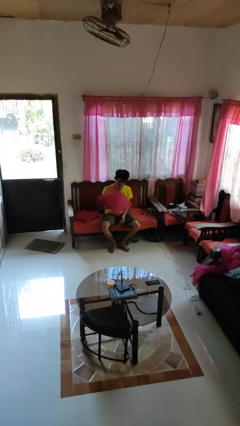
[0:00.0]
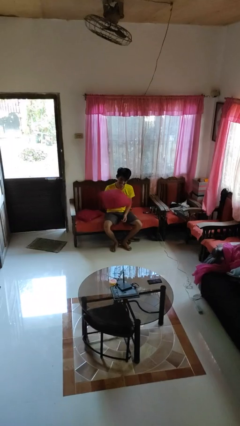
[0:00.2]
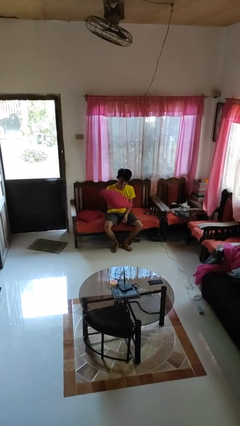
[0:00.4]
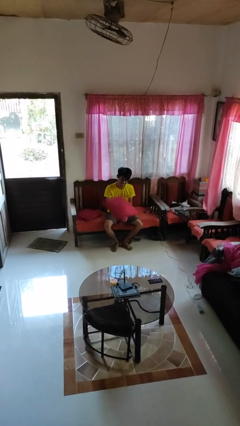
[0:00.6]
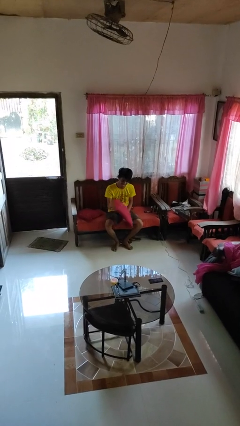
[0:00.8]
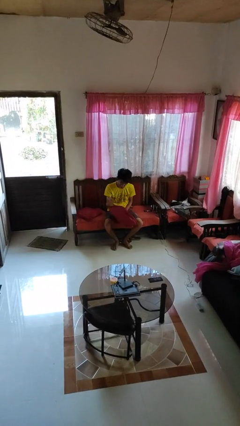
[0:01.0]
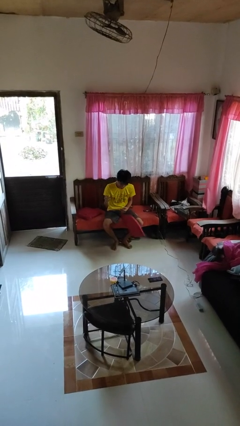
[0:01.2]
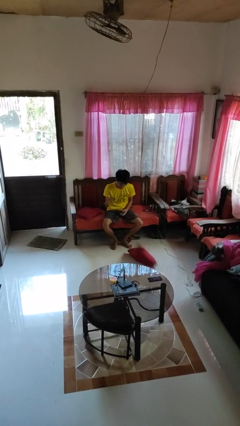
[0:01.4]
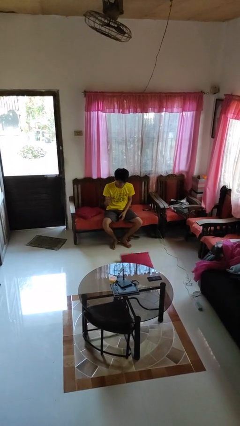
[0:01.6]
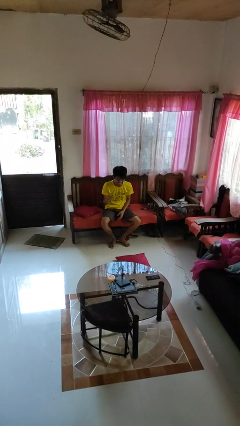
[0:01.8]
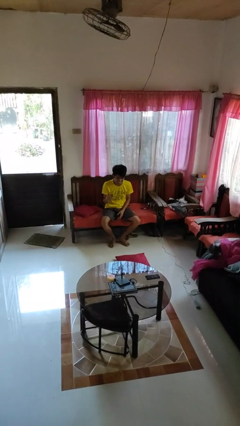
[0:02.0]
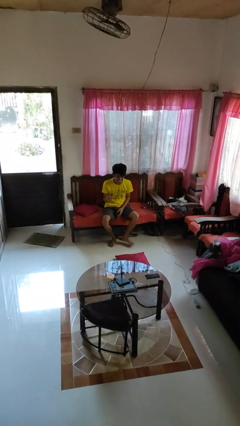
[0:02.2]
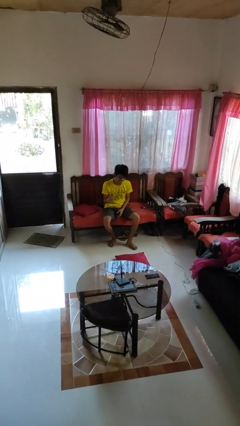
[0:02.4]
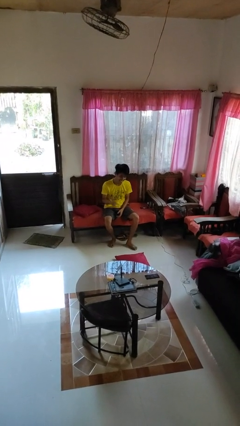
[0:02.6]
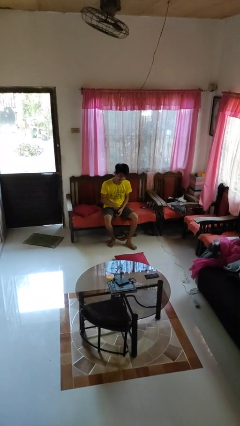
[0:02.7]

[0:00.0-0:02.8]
person drops object

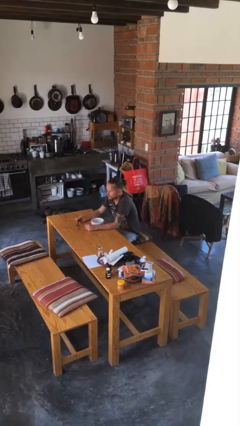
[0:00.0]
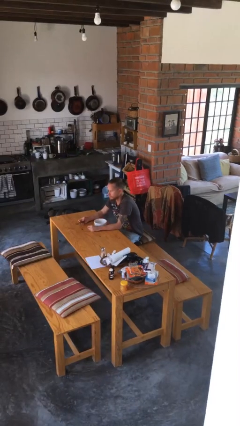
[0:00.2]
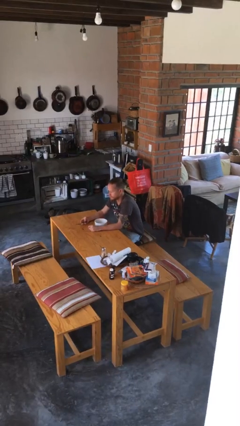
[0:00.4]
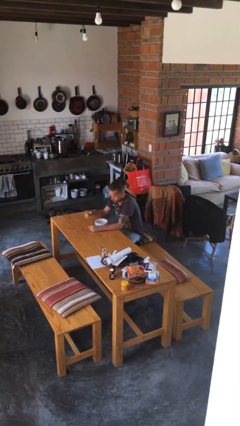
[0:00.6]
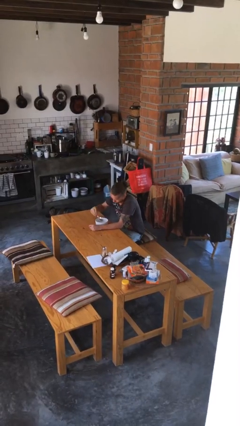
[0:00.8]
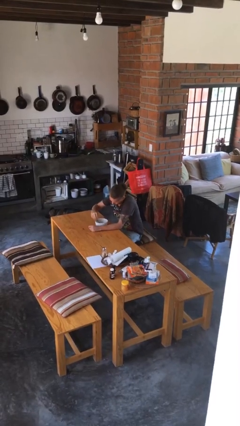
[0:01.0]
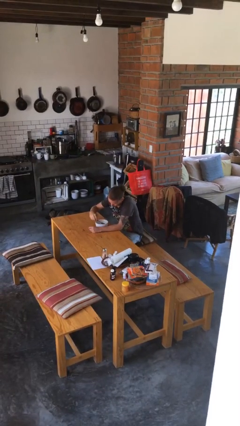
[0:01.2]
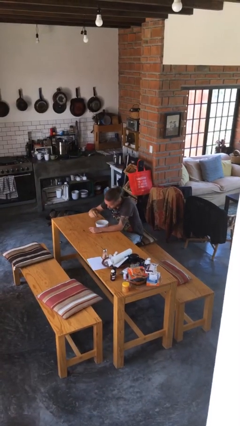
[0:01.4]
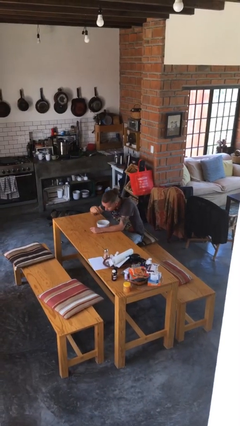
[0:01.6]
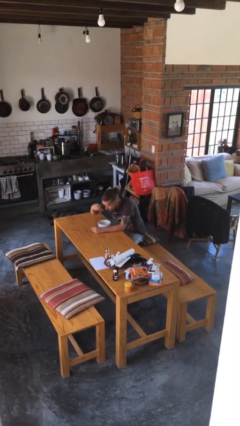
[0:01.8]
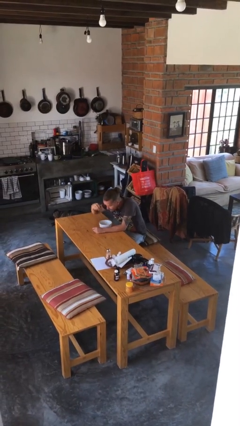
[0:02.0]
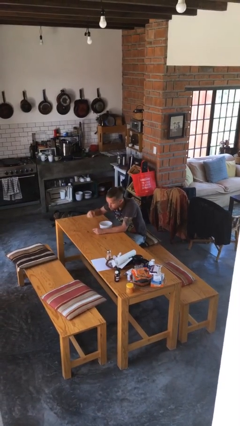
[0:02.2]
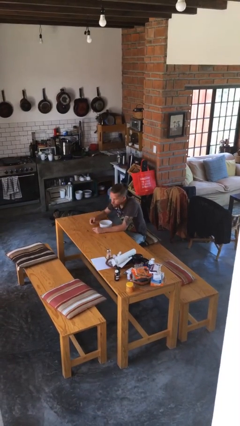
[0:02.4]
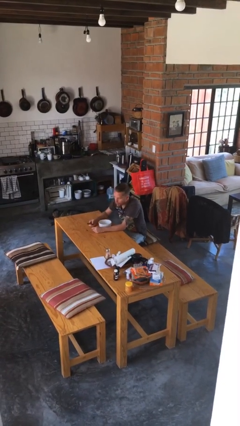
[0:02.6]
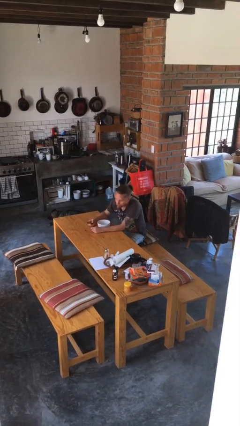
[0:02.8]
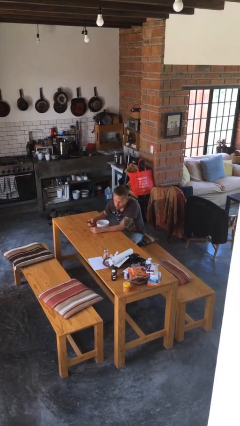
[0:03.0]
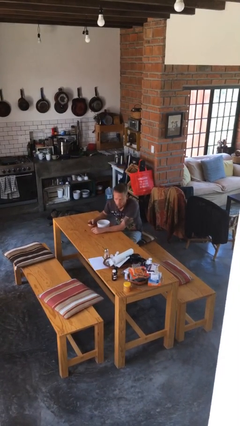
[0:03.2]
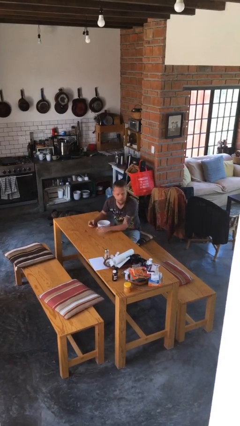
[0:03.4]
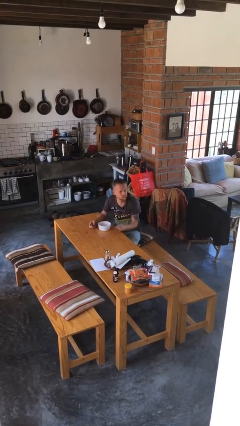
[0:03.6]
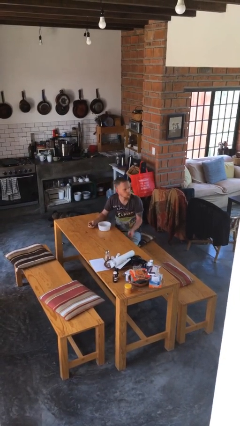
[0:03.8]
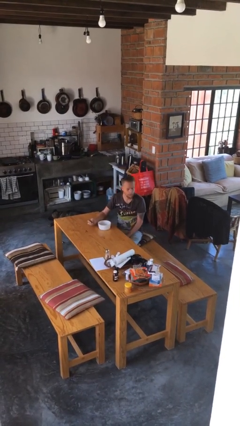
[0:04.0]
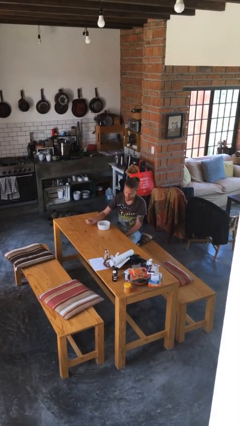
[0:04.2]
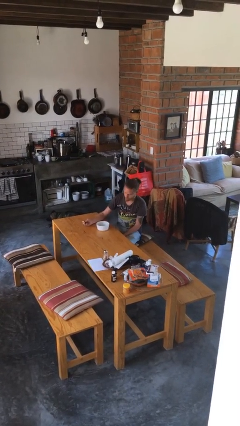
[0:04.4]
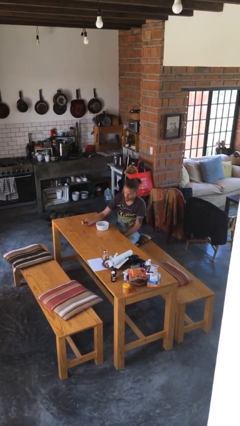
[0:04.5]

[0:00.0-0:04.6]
person eats with utensil

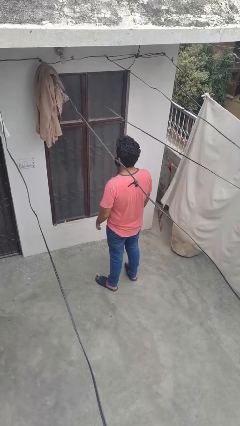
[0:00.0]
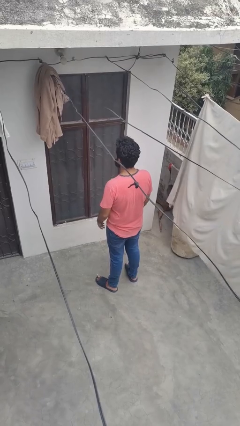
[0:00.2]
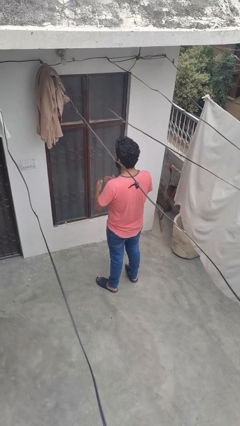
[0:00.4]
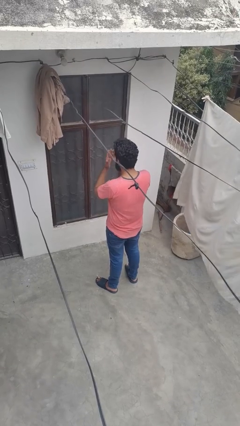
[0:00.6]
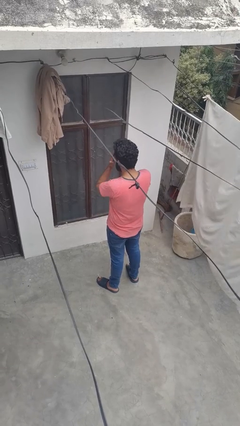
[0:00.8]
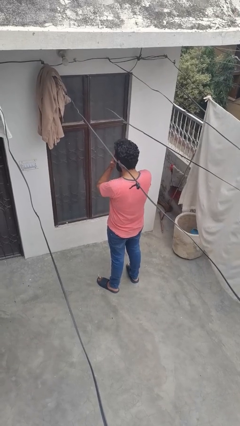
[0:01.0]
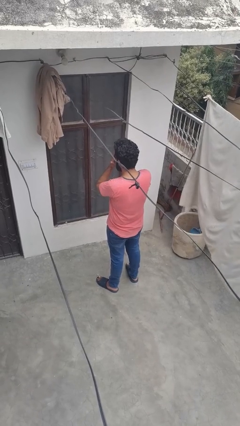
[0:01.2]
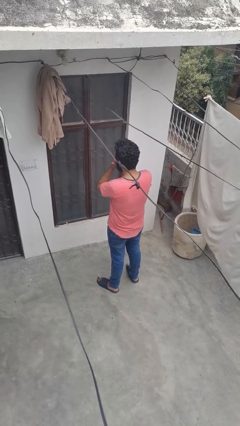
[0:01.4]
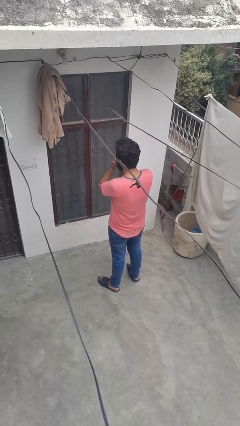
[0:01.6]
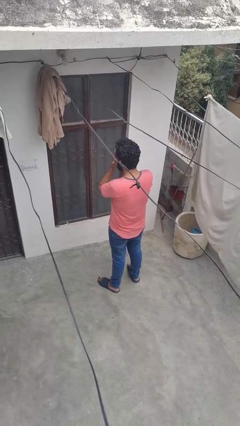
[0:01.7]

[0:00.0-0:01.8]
person covers face with hands

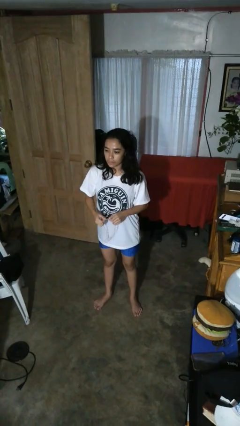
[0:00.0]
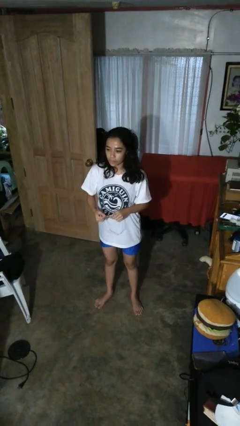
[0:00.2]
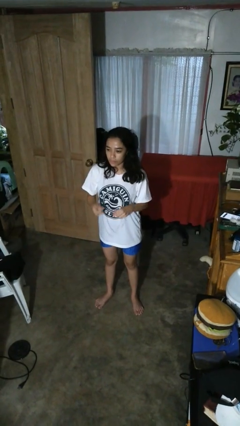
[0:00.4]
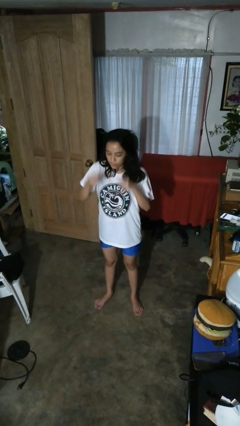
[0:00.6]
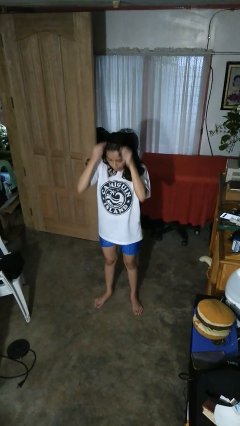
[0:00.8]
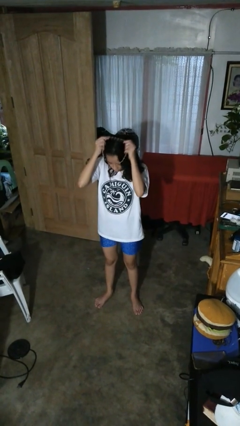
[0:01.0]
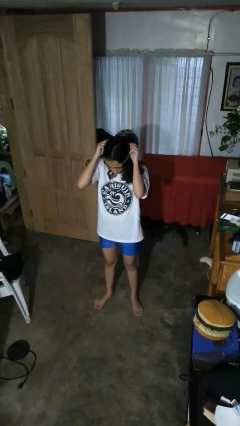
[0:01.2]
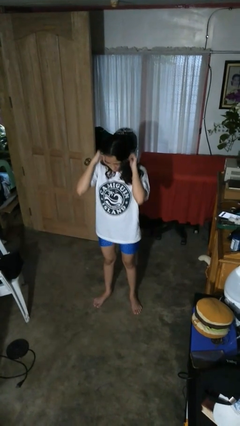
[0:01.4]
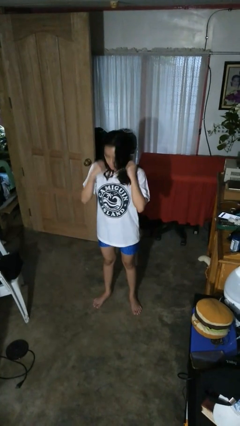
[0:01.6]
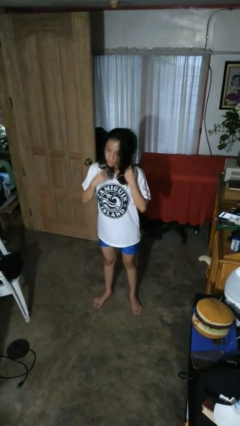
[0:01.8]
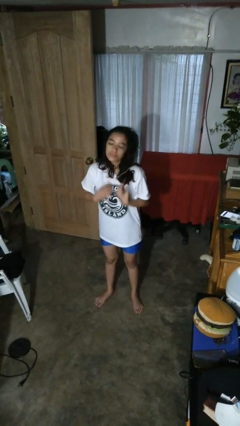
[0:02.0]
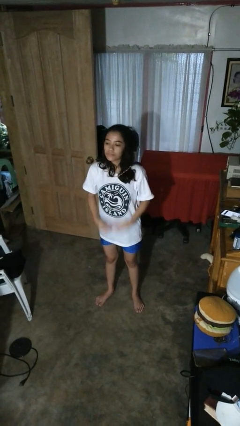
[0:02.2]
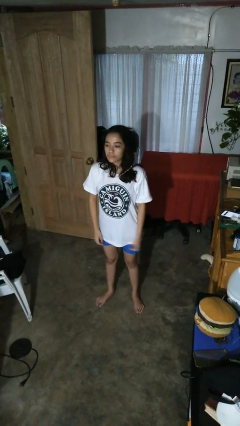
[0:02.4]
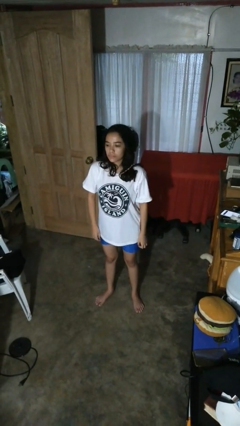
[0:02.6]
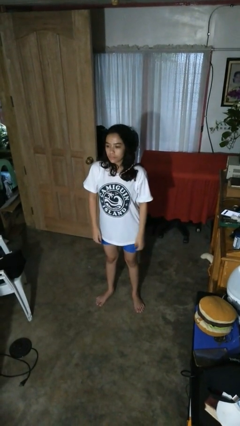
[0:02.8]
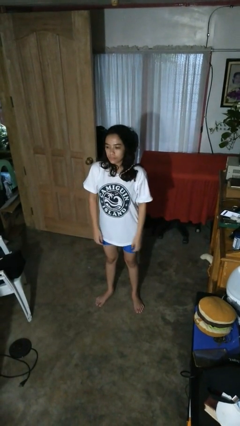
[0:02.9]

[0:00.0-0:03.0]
person puts on necklace

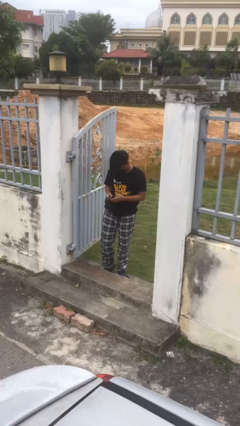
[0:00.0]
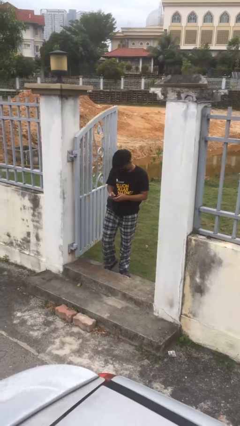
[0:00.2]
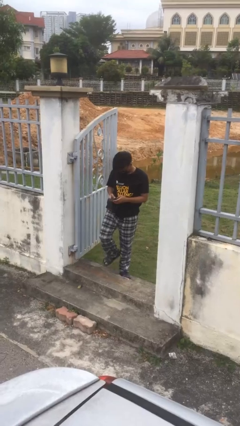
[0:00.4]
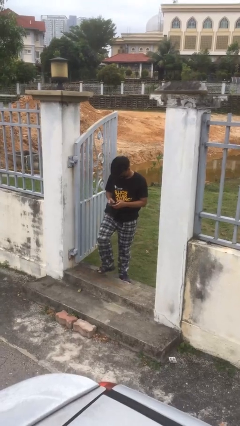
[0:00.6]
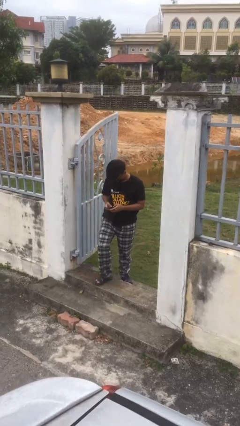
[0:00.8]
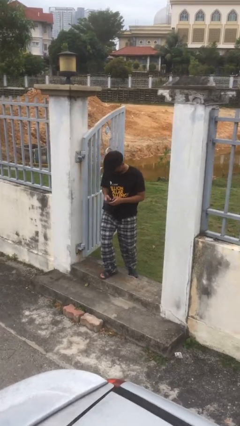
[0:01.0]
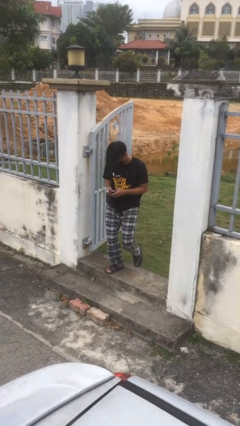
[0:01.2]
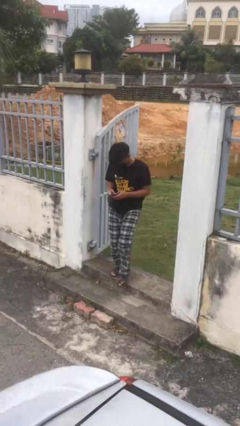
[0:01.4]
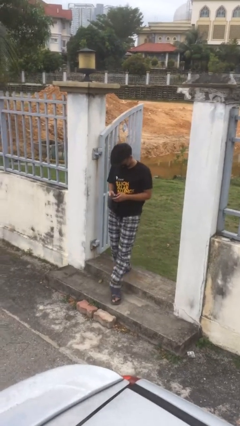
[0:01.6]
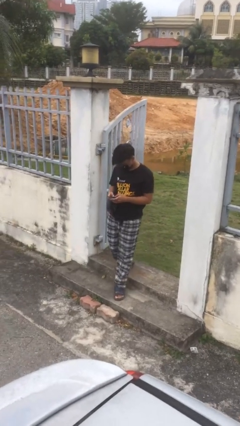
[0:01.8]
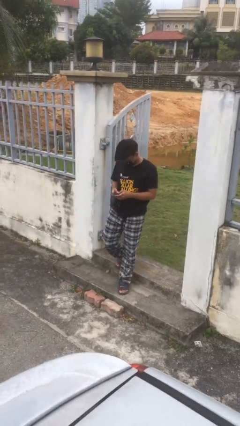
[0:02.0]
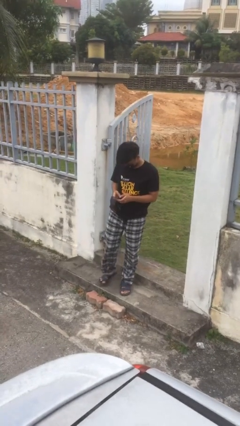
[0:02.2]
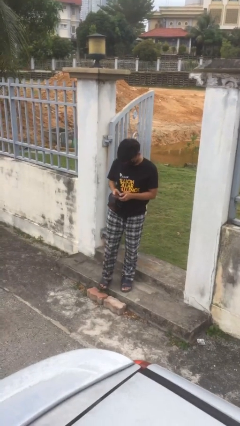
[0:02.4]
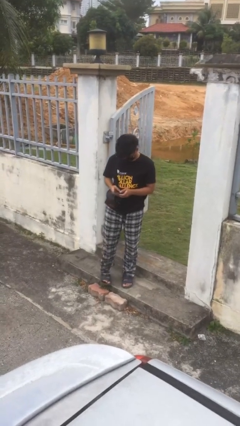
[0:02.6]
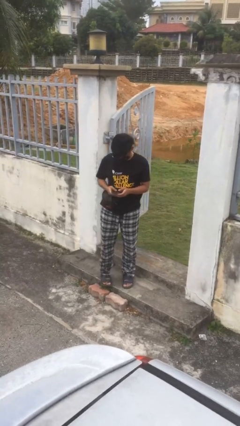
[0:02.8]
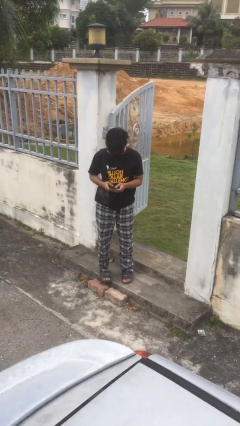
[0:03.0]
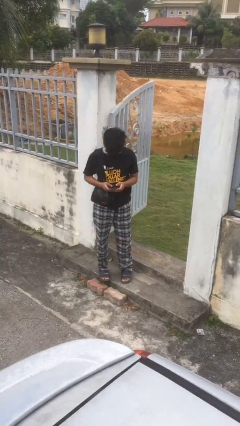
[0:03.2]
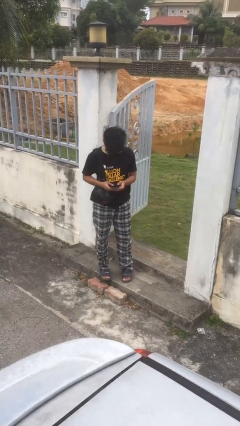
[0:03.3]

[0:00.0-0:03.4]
person enters scene through structure

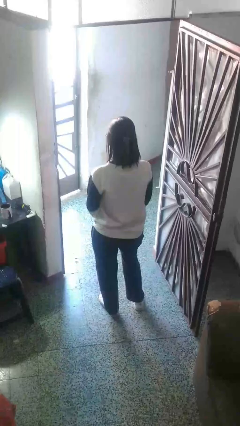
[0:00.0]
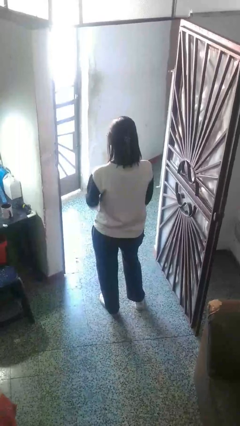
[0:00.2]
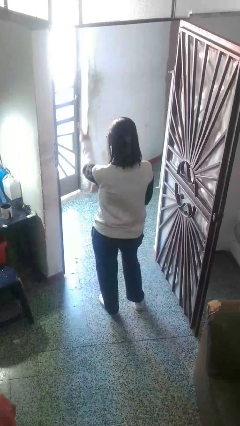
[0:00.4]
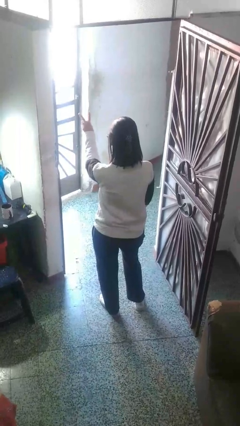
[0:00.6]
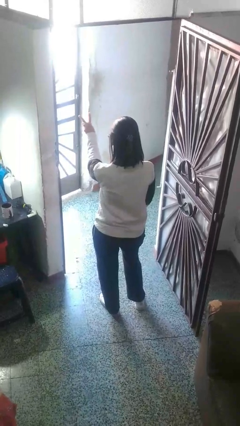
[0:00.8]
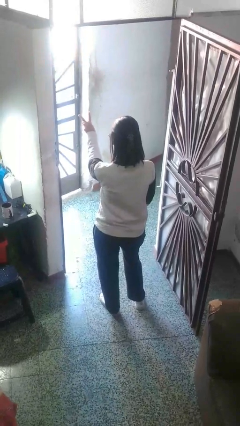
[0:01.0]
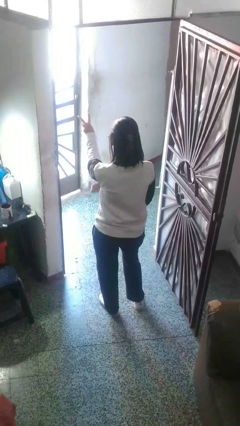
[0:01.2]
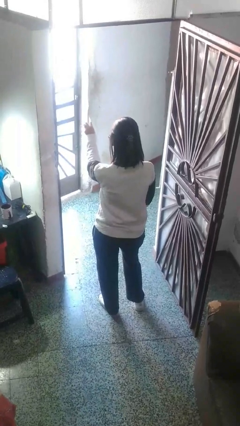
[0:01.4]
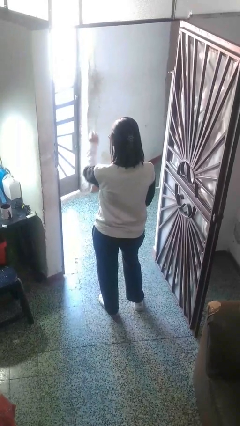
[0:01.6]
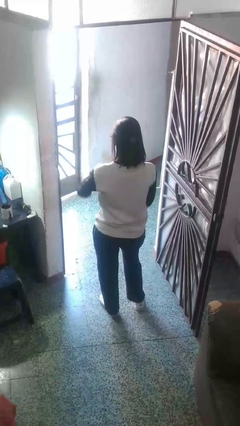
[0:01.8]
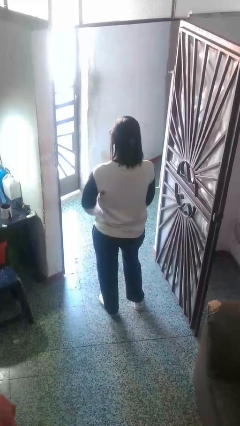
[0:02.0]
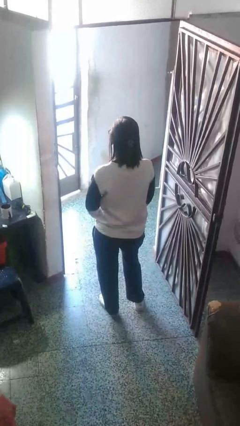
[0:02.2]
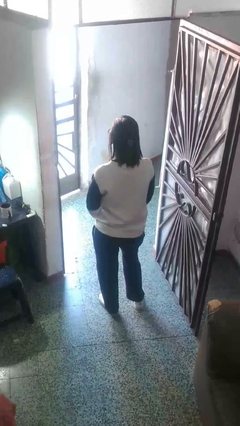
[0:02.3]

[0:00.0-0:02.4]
person gestures peace
